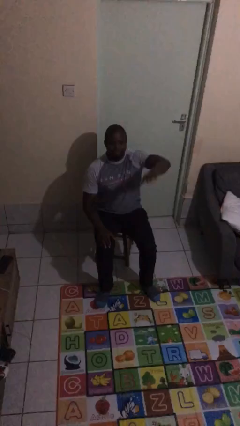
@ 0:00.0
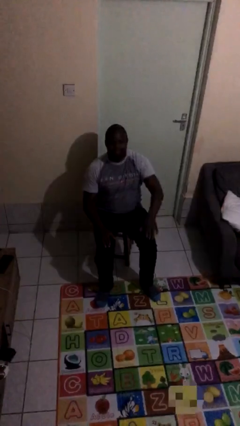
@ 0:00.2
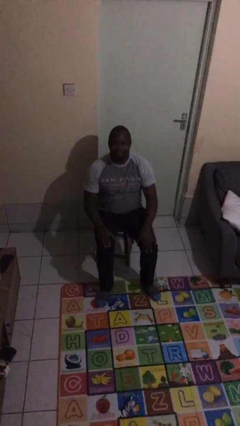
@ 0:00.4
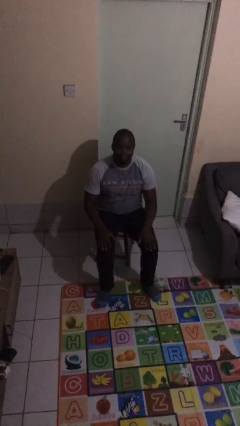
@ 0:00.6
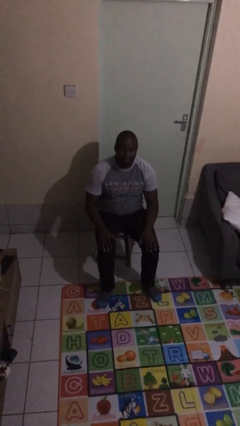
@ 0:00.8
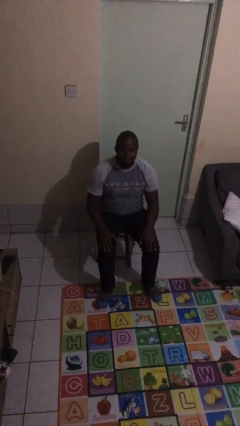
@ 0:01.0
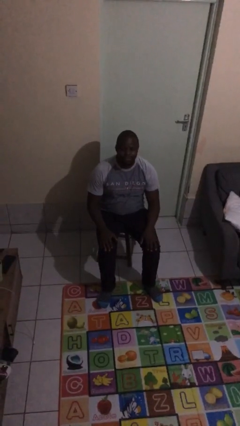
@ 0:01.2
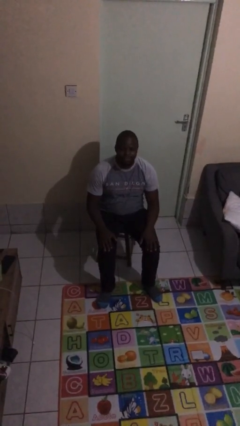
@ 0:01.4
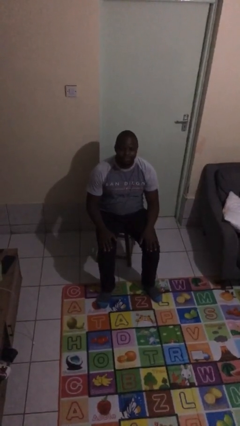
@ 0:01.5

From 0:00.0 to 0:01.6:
person gestures lower hand

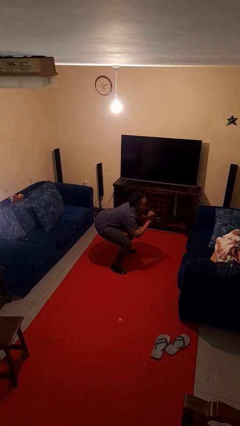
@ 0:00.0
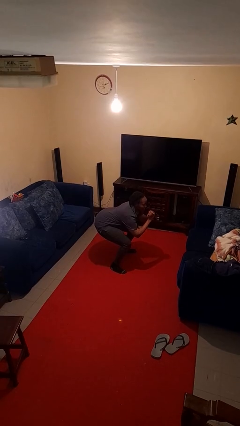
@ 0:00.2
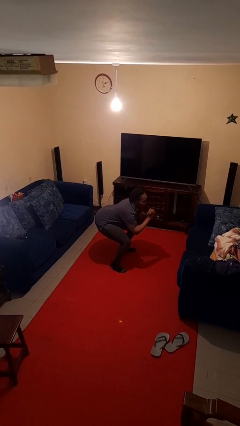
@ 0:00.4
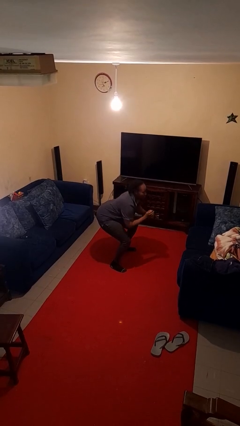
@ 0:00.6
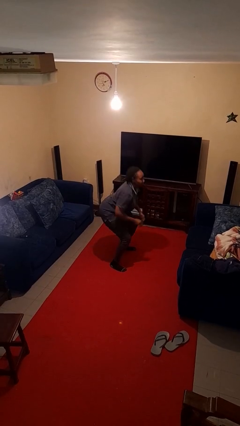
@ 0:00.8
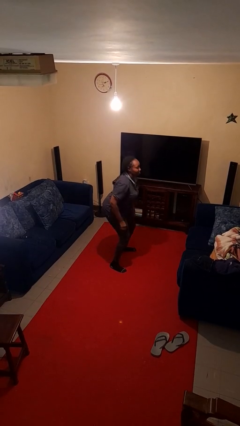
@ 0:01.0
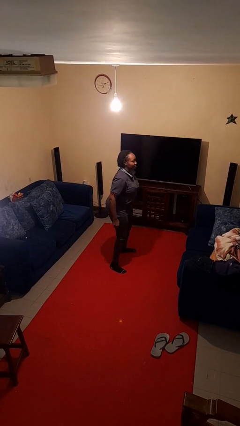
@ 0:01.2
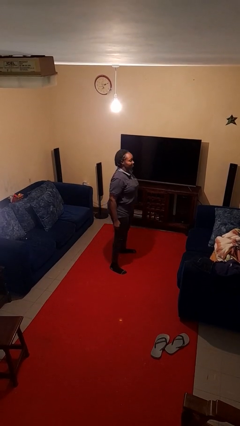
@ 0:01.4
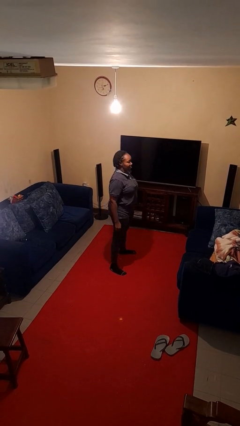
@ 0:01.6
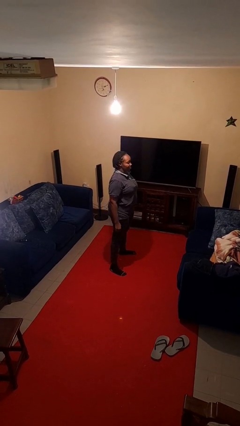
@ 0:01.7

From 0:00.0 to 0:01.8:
person stands up

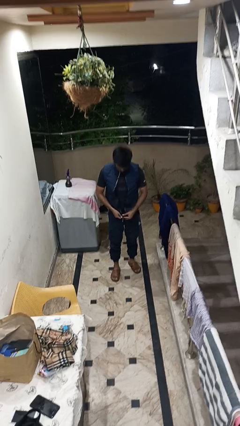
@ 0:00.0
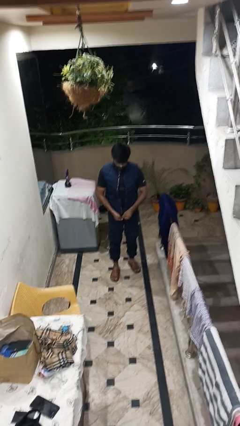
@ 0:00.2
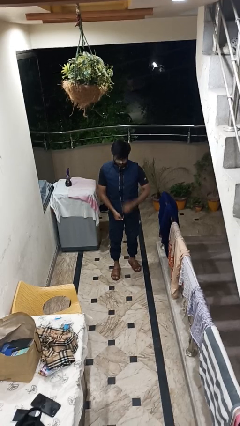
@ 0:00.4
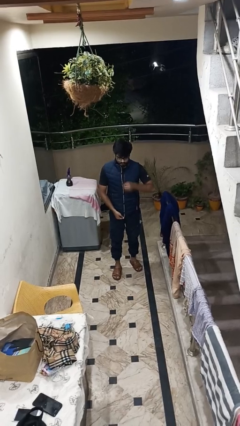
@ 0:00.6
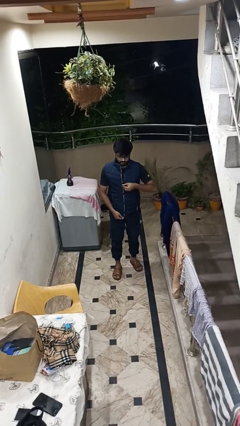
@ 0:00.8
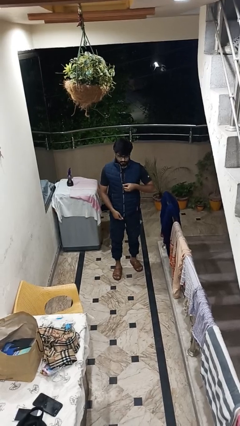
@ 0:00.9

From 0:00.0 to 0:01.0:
person zips up jacket

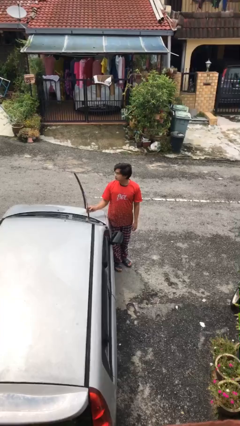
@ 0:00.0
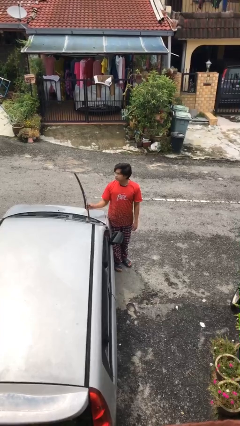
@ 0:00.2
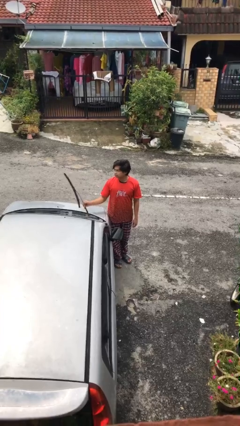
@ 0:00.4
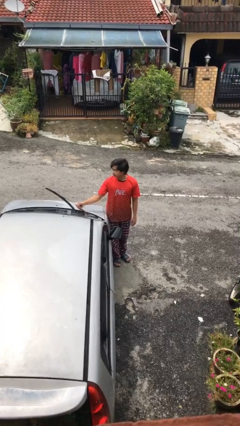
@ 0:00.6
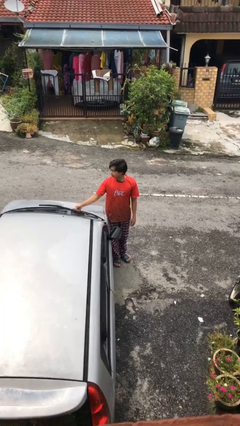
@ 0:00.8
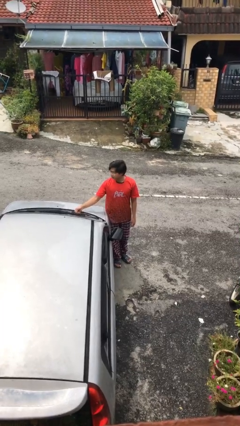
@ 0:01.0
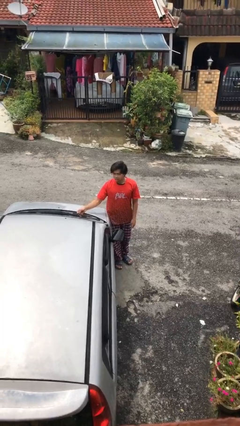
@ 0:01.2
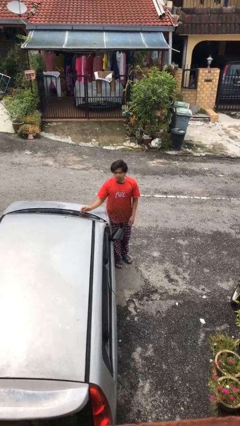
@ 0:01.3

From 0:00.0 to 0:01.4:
person flips down car wipers

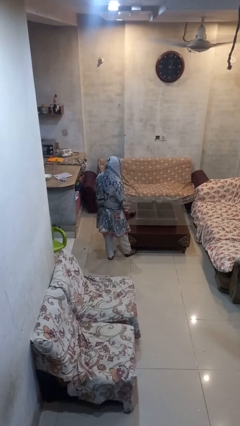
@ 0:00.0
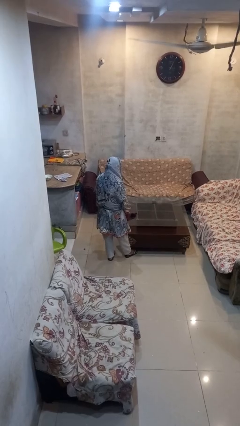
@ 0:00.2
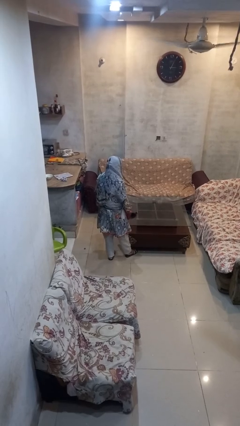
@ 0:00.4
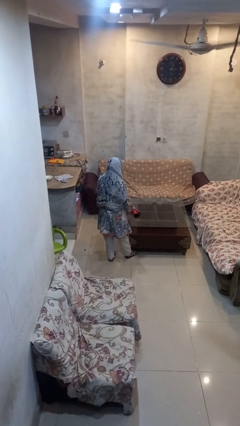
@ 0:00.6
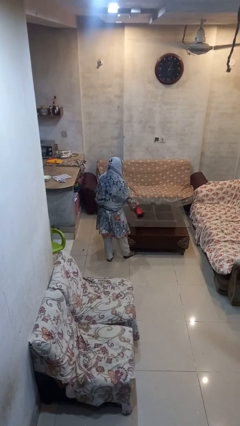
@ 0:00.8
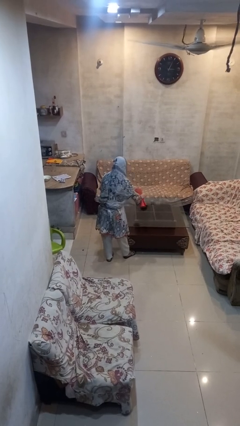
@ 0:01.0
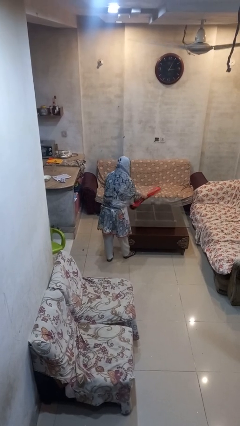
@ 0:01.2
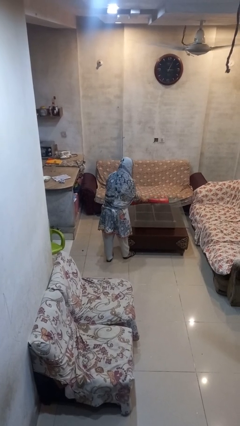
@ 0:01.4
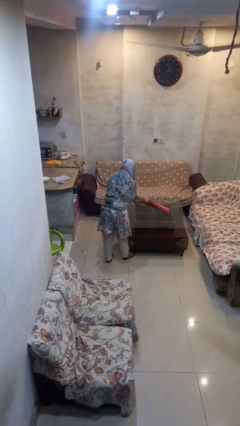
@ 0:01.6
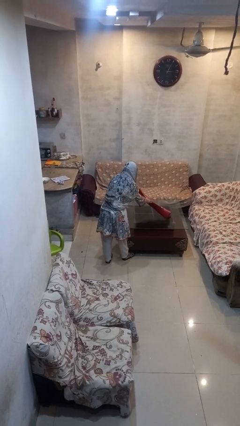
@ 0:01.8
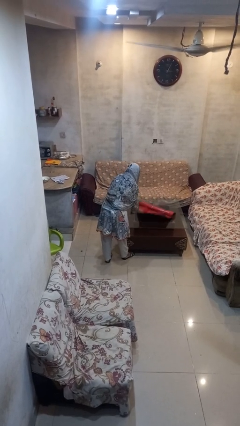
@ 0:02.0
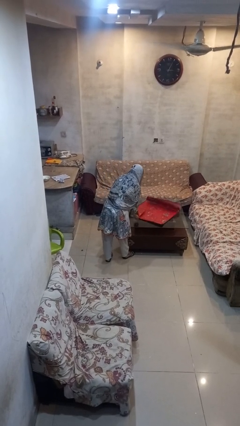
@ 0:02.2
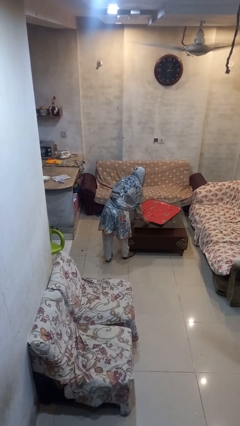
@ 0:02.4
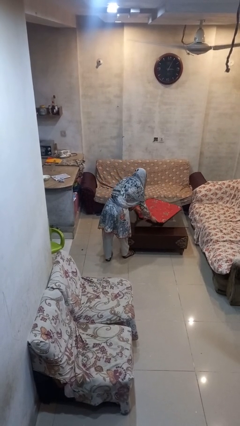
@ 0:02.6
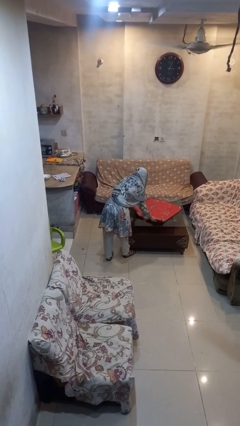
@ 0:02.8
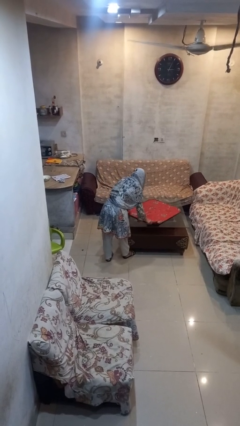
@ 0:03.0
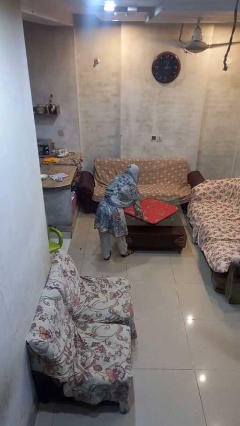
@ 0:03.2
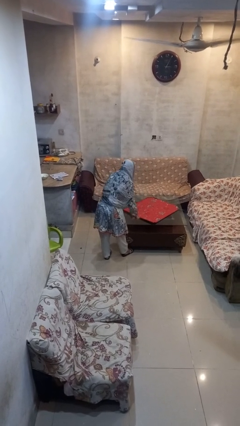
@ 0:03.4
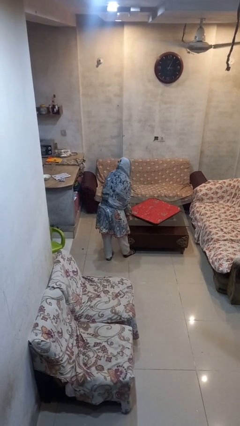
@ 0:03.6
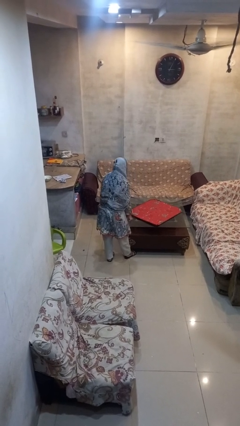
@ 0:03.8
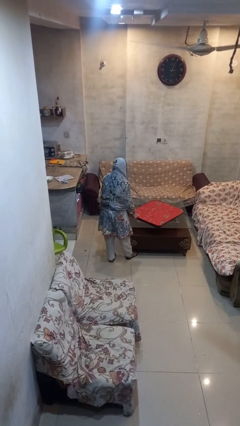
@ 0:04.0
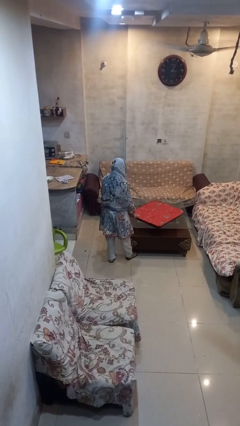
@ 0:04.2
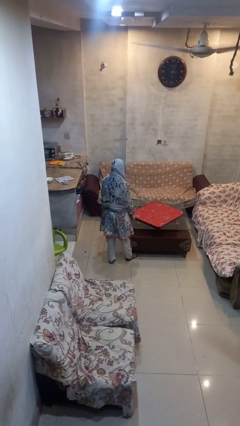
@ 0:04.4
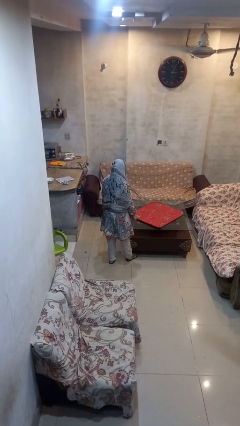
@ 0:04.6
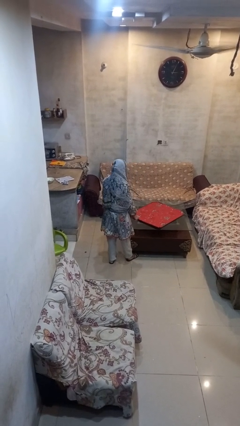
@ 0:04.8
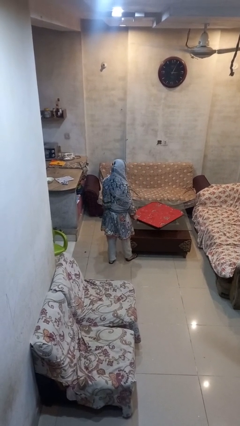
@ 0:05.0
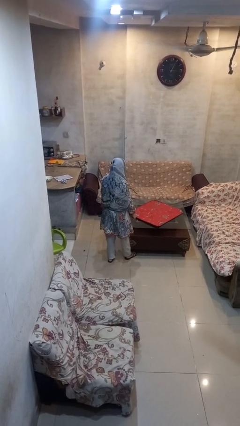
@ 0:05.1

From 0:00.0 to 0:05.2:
person spreads tablecloth

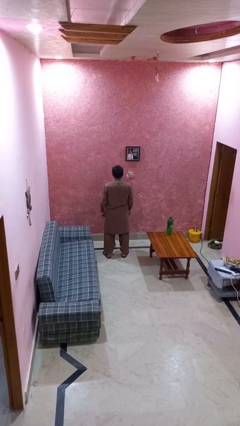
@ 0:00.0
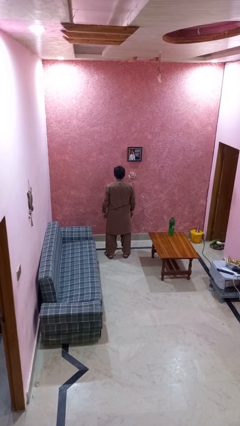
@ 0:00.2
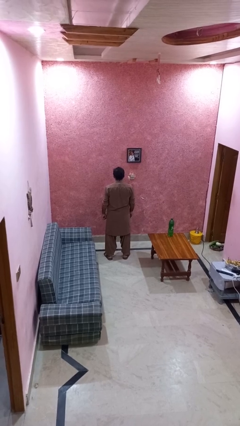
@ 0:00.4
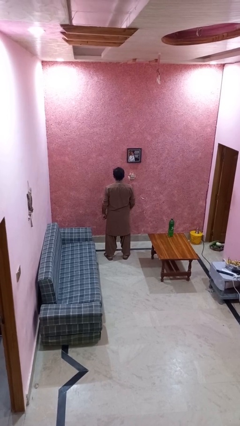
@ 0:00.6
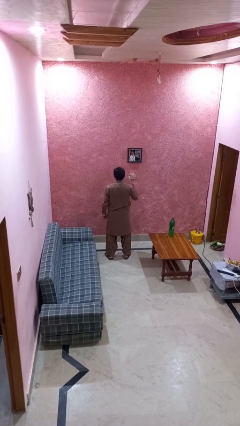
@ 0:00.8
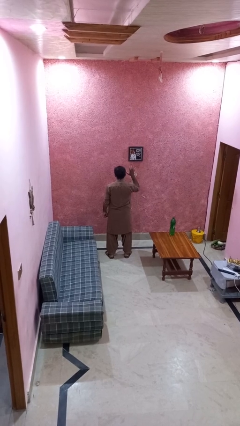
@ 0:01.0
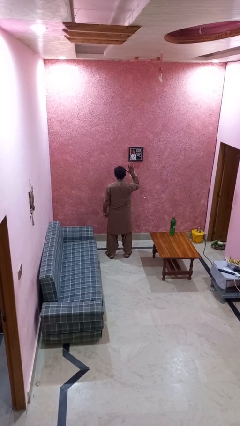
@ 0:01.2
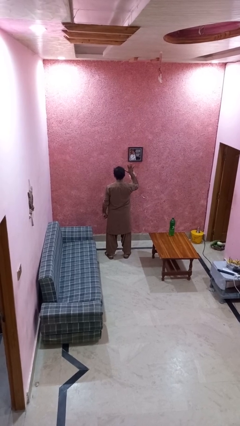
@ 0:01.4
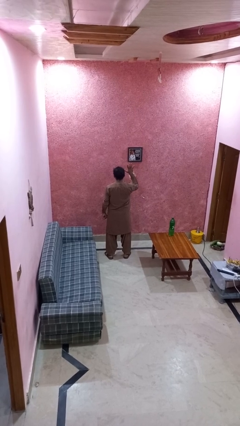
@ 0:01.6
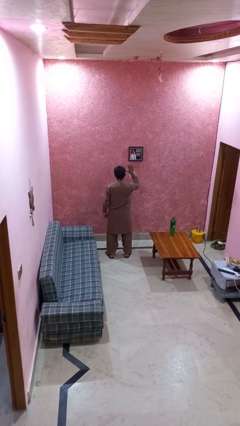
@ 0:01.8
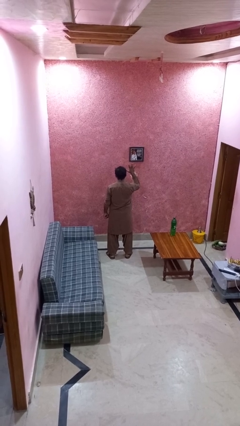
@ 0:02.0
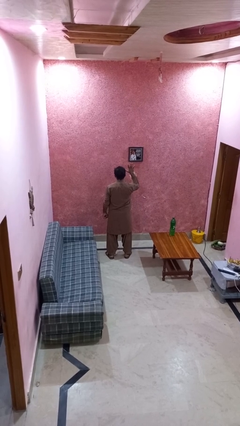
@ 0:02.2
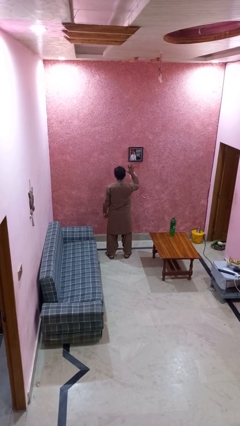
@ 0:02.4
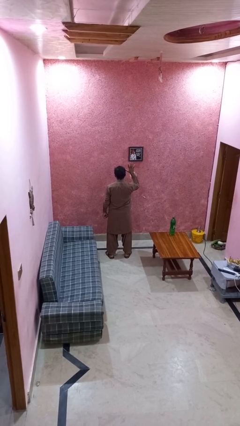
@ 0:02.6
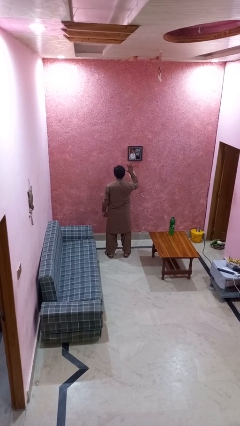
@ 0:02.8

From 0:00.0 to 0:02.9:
person gestures number five

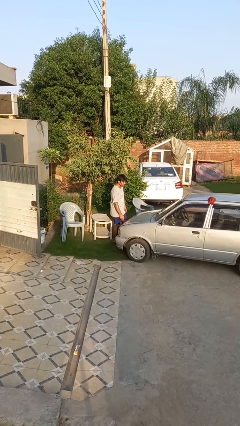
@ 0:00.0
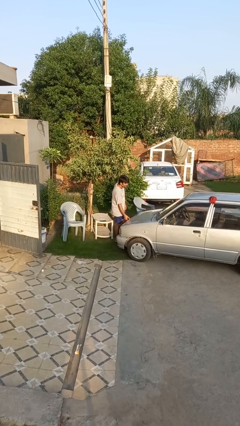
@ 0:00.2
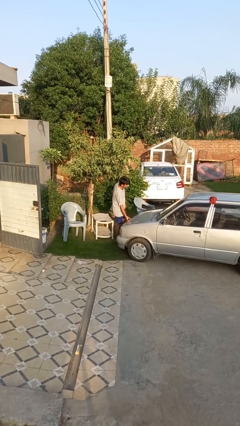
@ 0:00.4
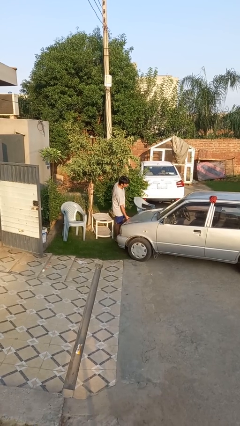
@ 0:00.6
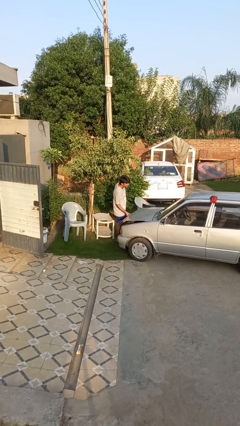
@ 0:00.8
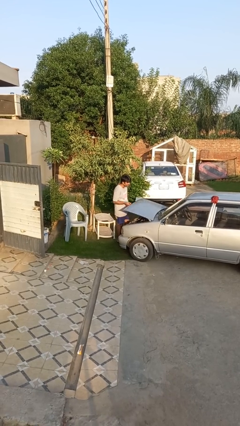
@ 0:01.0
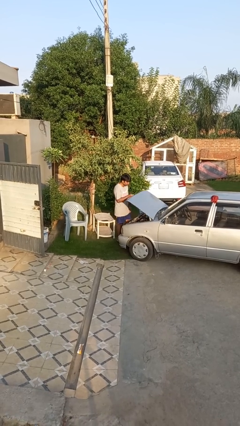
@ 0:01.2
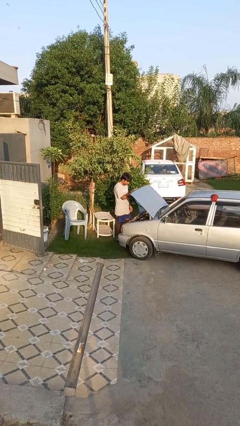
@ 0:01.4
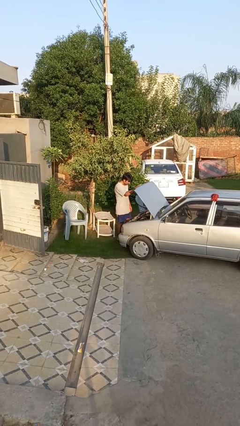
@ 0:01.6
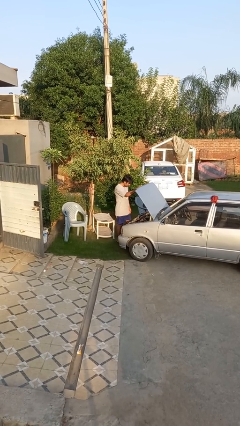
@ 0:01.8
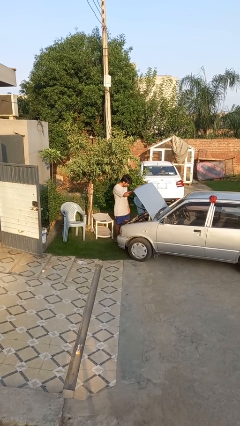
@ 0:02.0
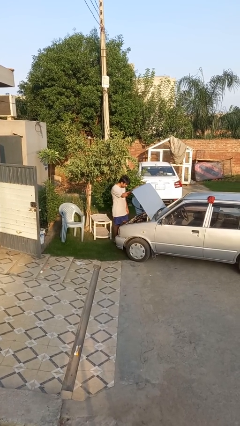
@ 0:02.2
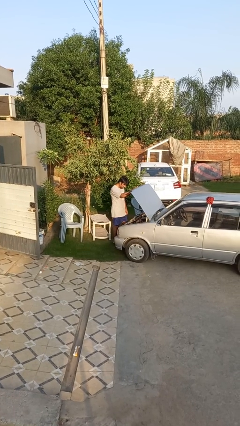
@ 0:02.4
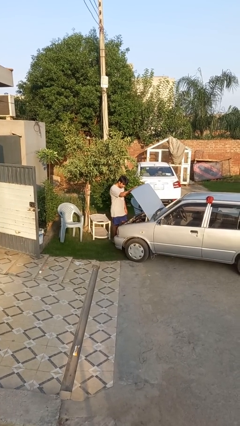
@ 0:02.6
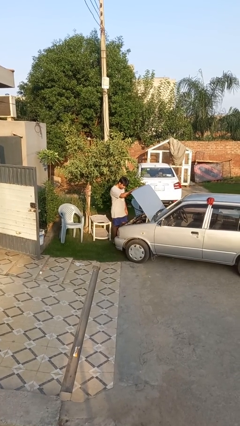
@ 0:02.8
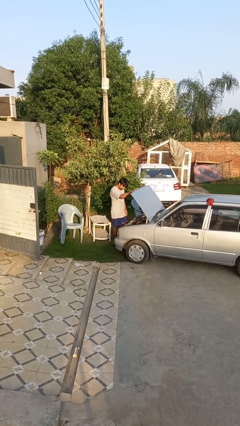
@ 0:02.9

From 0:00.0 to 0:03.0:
person opens car hood

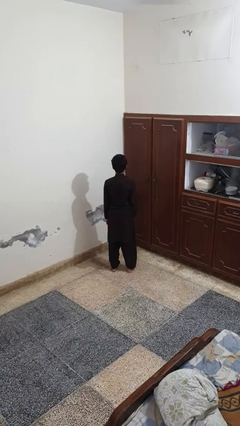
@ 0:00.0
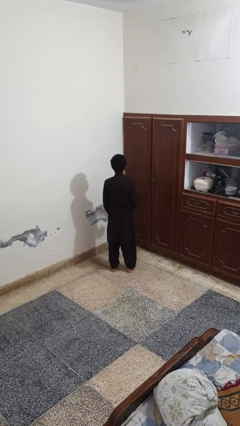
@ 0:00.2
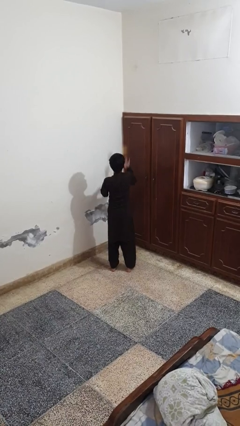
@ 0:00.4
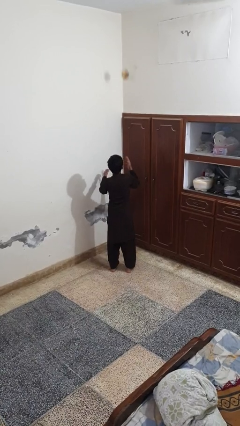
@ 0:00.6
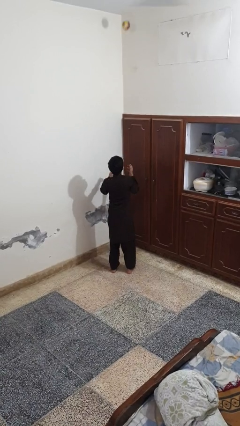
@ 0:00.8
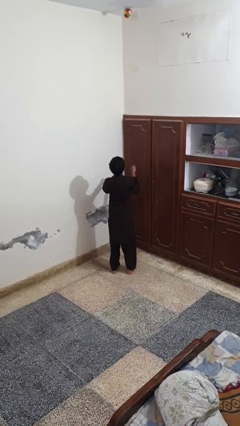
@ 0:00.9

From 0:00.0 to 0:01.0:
person drops object
